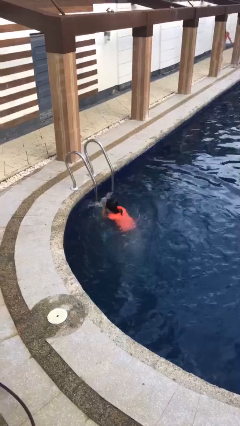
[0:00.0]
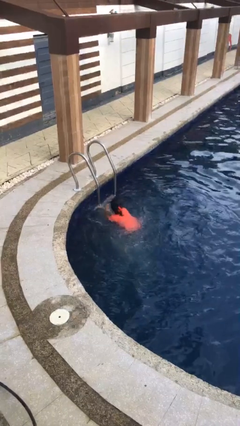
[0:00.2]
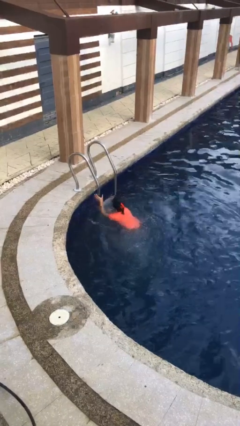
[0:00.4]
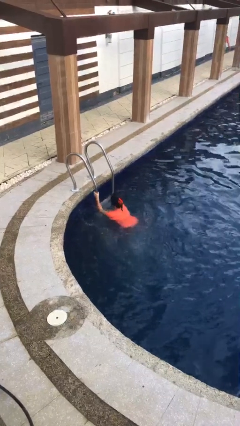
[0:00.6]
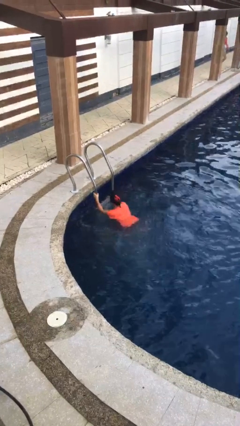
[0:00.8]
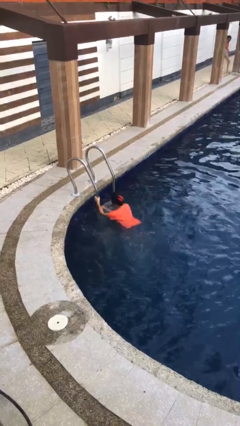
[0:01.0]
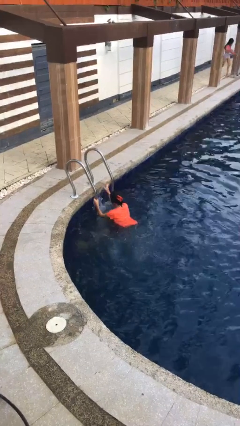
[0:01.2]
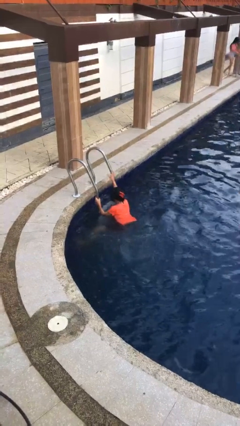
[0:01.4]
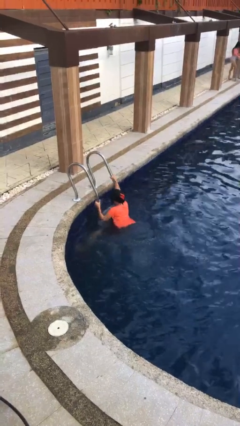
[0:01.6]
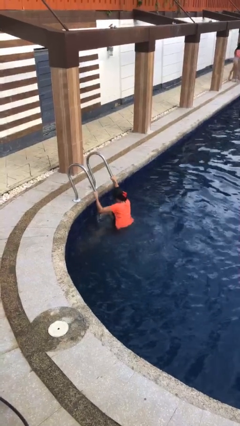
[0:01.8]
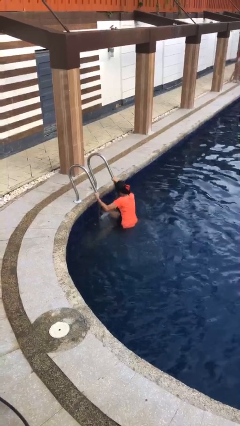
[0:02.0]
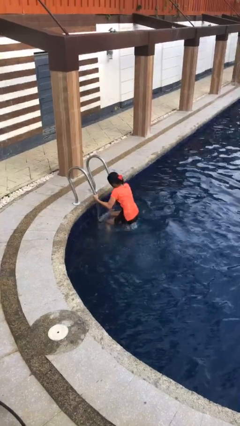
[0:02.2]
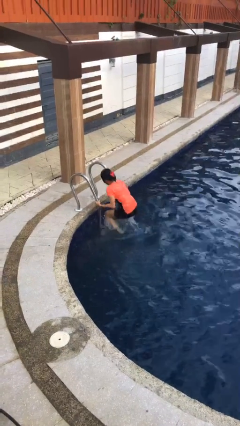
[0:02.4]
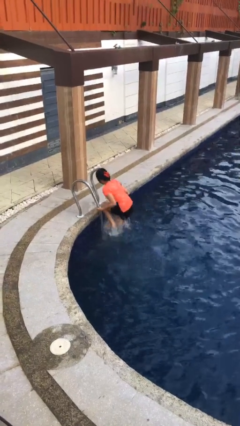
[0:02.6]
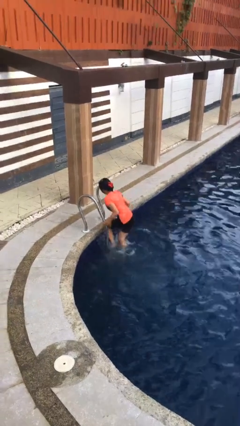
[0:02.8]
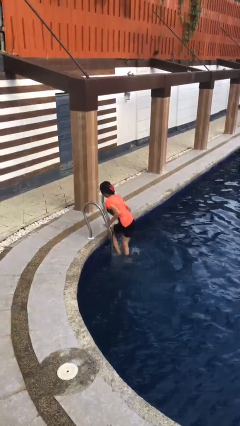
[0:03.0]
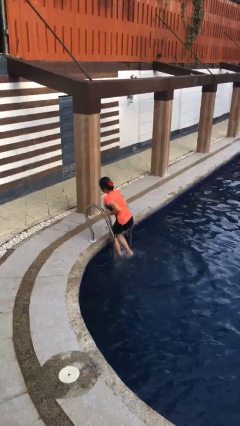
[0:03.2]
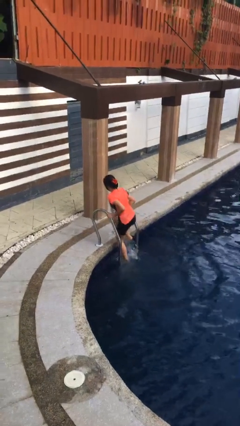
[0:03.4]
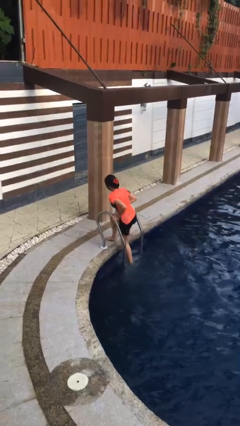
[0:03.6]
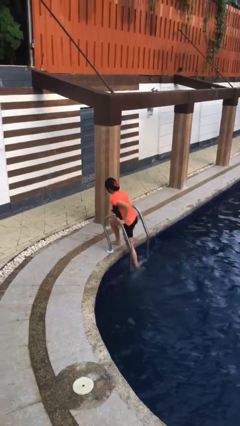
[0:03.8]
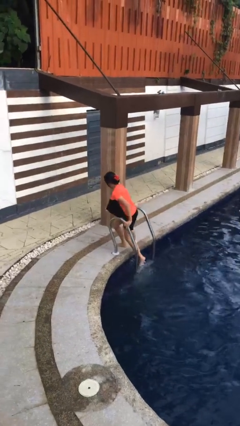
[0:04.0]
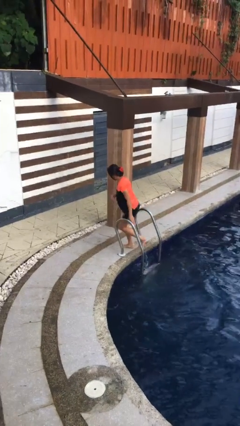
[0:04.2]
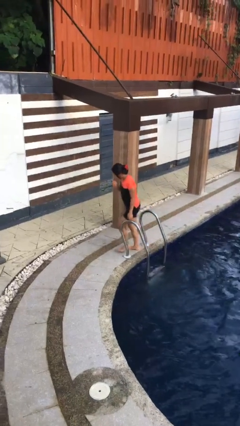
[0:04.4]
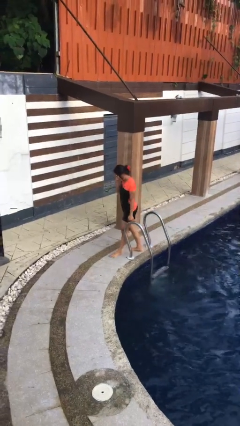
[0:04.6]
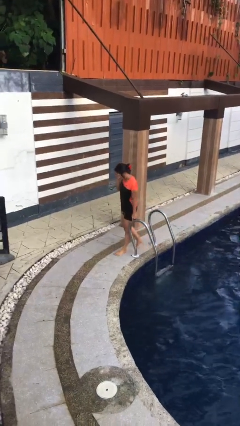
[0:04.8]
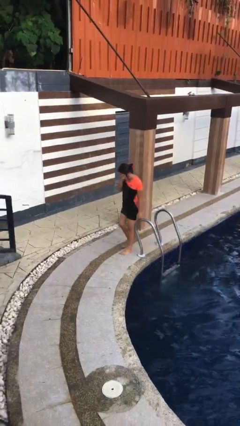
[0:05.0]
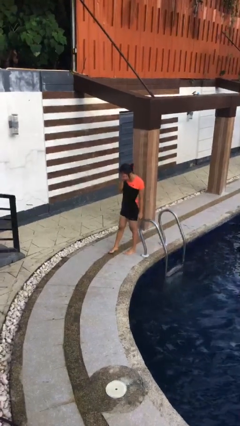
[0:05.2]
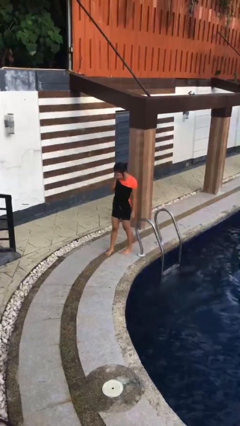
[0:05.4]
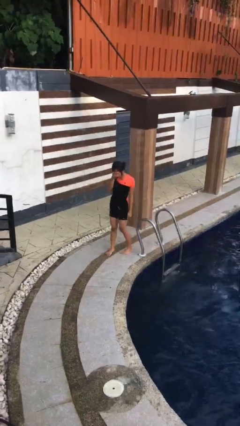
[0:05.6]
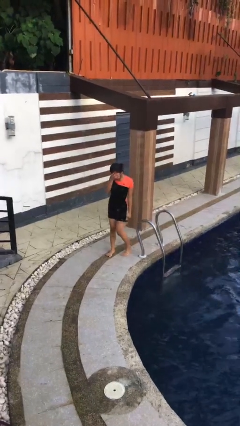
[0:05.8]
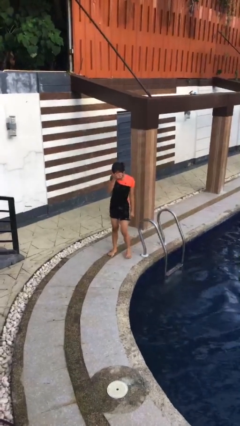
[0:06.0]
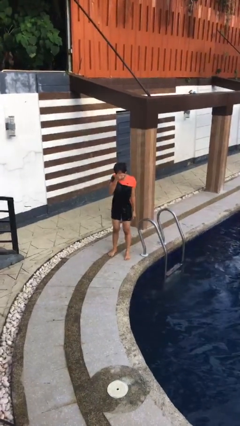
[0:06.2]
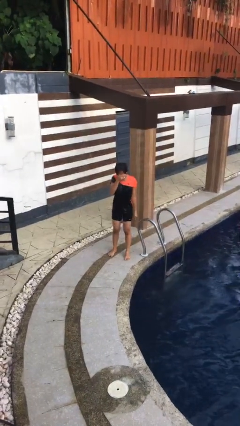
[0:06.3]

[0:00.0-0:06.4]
person exits pool

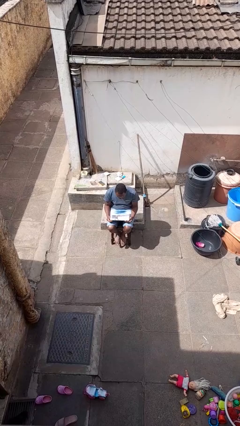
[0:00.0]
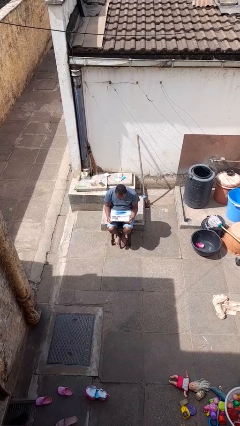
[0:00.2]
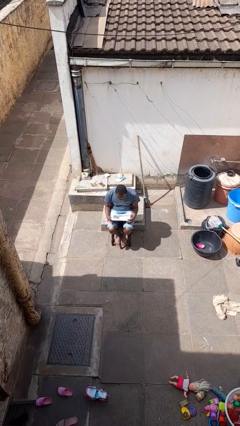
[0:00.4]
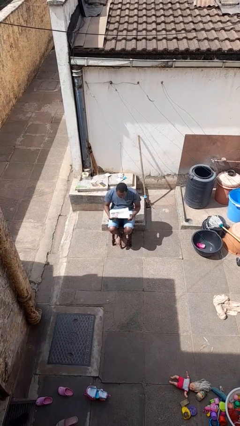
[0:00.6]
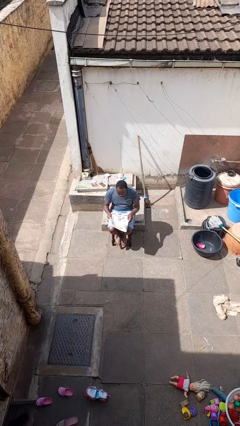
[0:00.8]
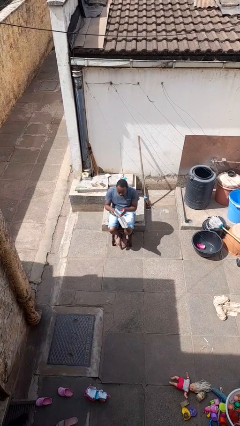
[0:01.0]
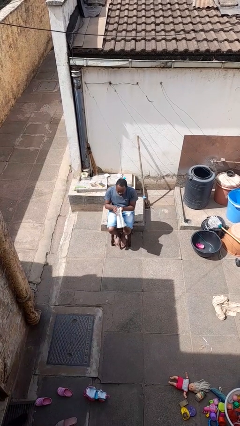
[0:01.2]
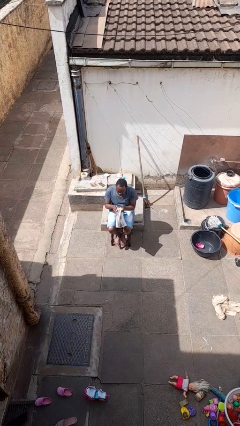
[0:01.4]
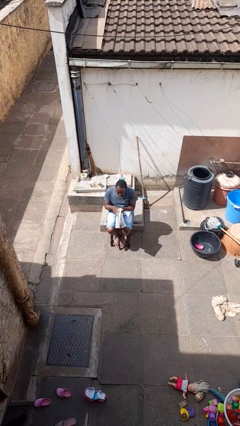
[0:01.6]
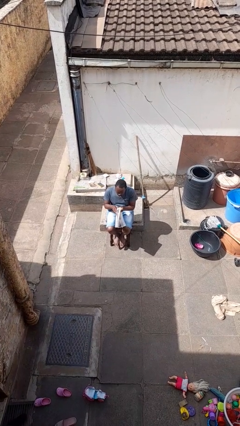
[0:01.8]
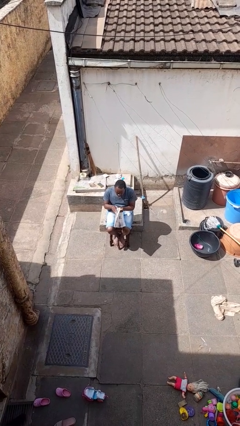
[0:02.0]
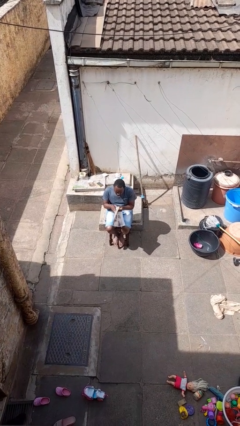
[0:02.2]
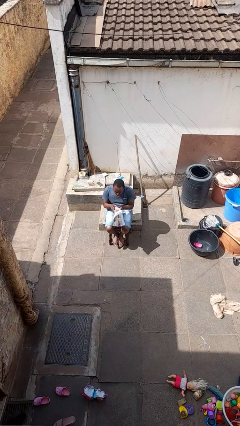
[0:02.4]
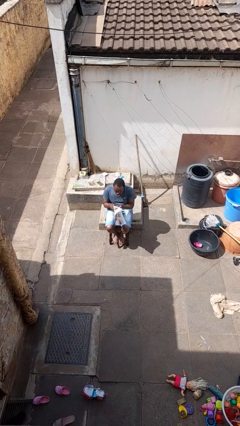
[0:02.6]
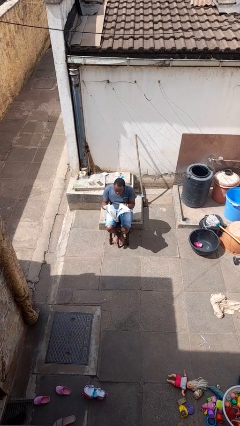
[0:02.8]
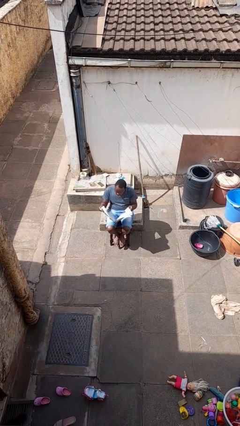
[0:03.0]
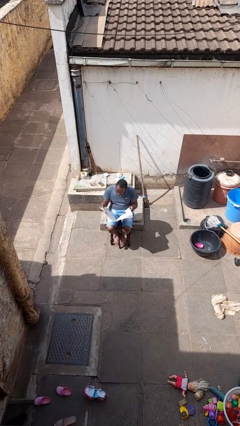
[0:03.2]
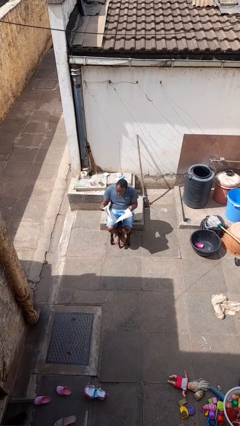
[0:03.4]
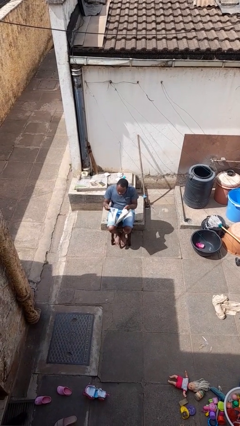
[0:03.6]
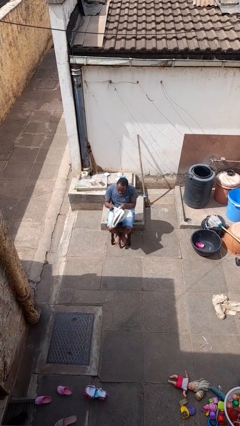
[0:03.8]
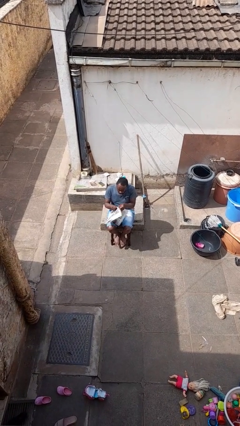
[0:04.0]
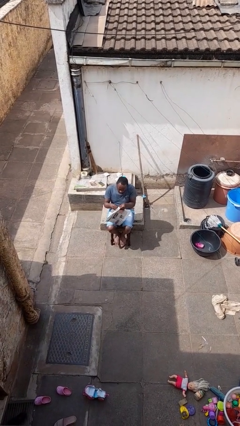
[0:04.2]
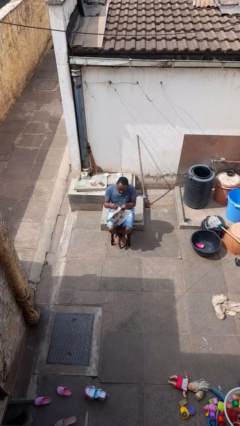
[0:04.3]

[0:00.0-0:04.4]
person reads newspaper

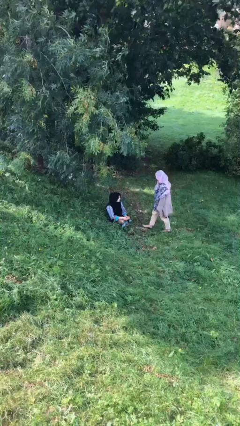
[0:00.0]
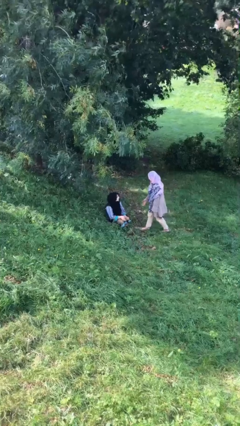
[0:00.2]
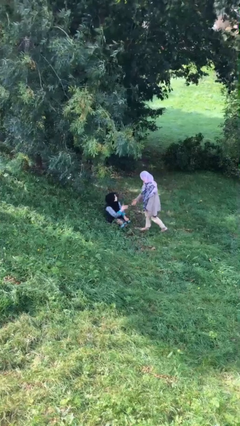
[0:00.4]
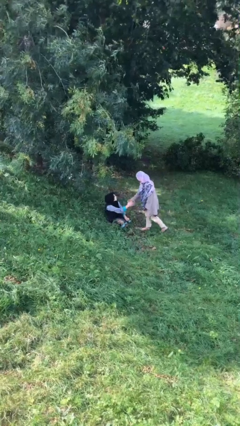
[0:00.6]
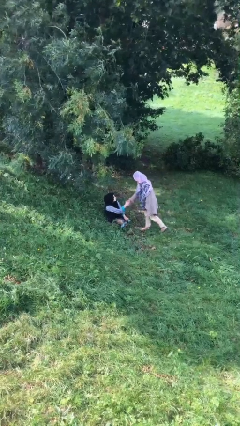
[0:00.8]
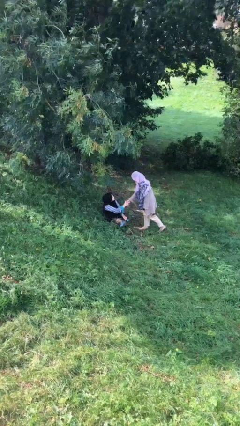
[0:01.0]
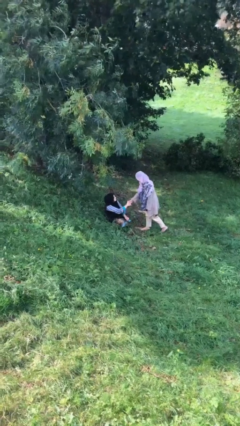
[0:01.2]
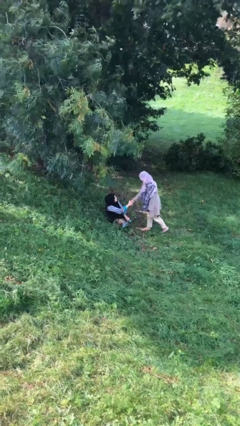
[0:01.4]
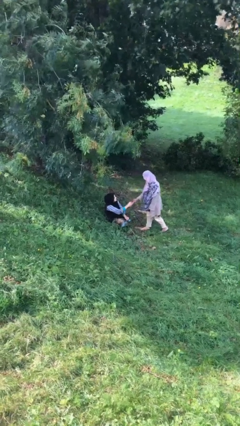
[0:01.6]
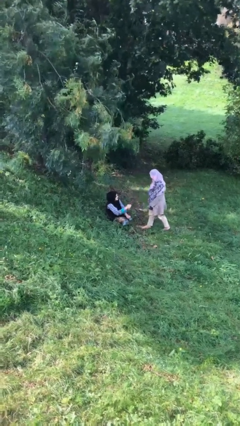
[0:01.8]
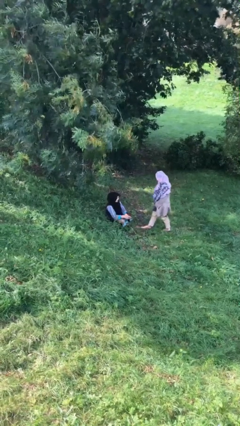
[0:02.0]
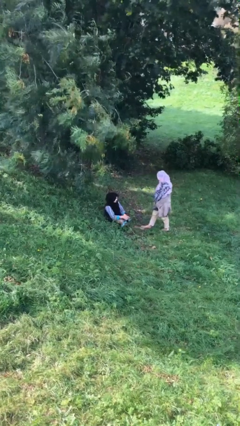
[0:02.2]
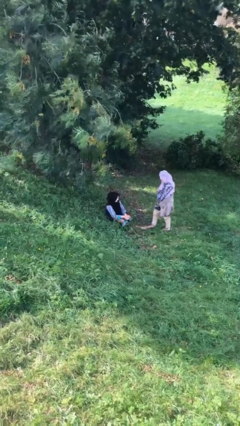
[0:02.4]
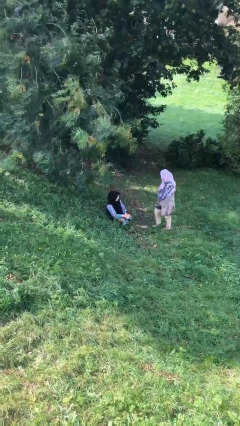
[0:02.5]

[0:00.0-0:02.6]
person shakes hand

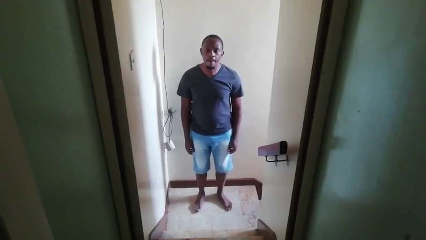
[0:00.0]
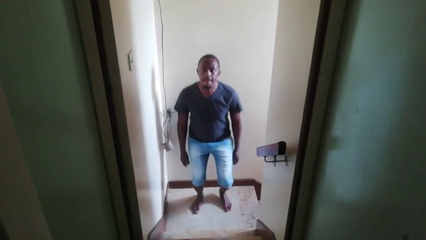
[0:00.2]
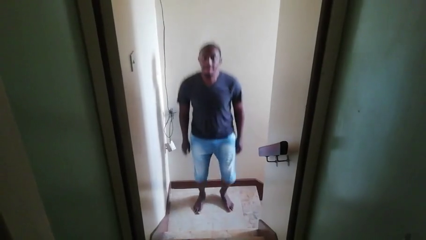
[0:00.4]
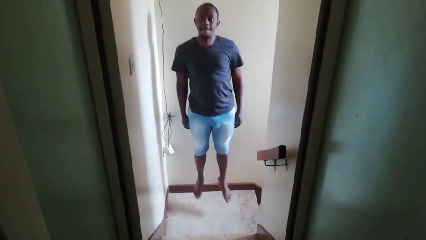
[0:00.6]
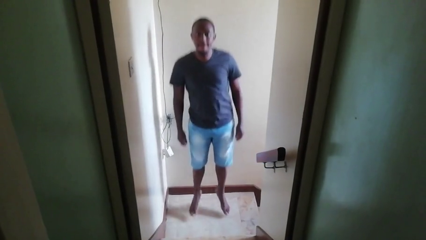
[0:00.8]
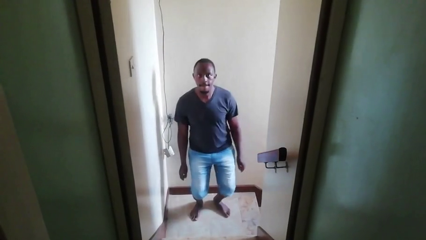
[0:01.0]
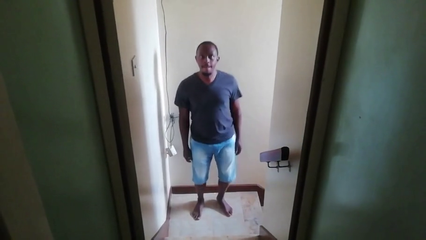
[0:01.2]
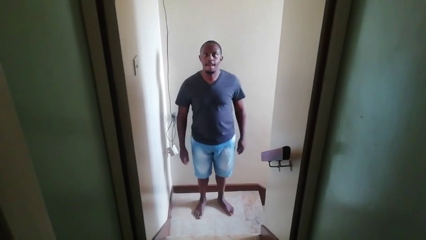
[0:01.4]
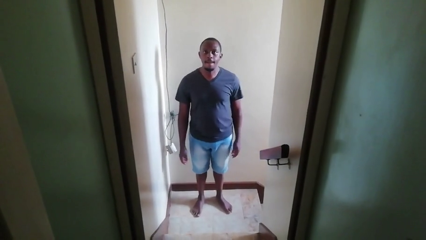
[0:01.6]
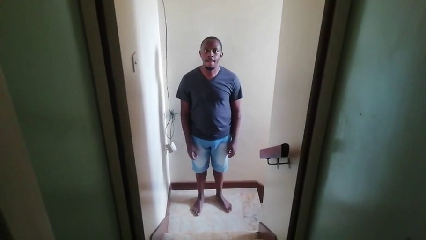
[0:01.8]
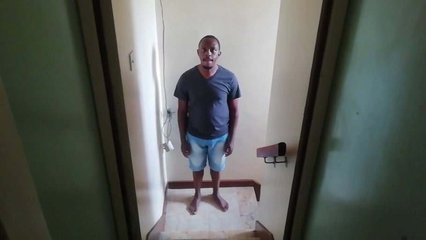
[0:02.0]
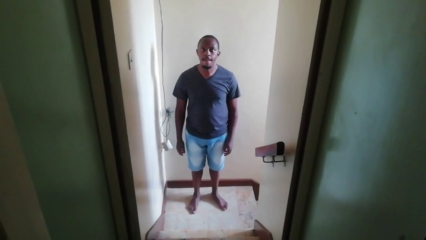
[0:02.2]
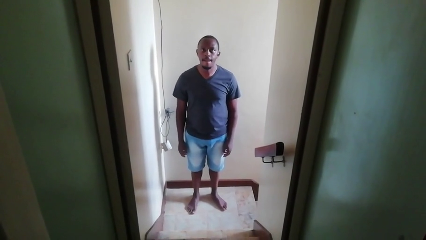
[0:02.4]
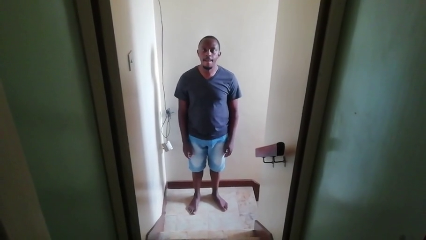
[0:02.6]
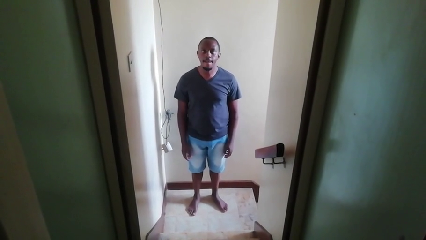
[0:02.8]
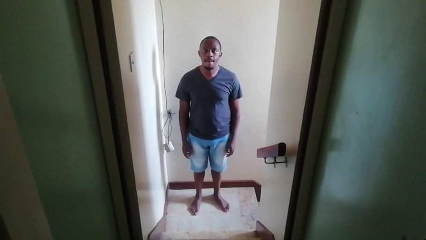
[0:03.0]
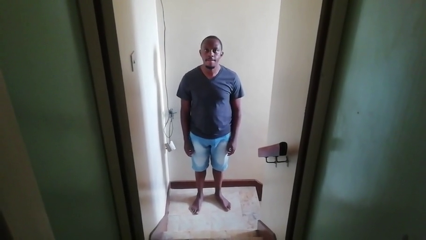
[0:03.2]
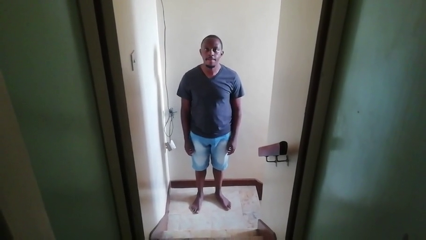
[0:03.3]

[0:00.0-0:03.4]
person takes phone from pocket

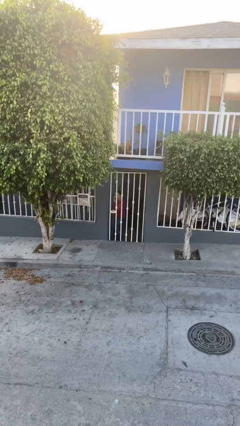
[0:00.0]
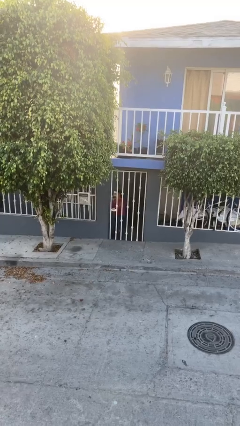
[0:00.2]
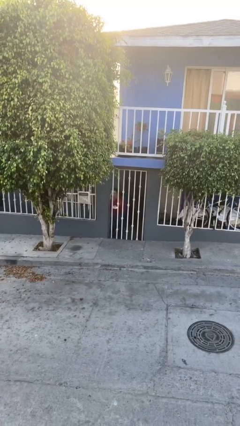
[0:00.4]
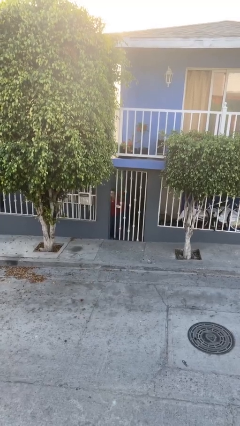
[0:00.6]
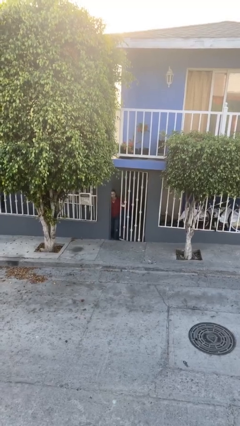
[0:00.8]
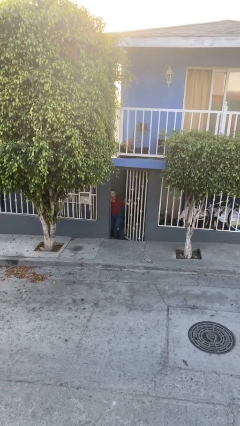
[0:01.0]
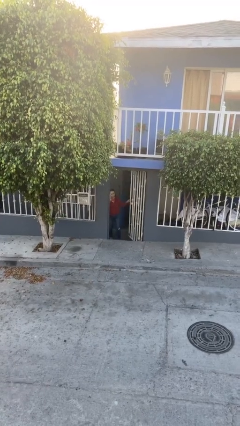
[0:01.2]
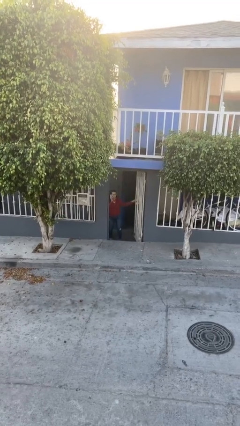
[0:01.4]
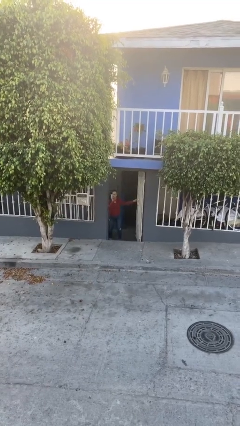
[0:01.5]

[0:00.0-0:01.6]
person opens facility door
